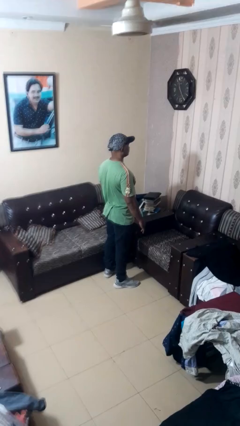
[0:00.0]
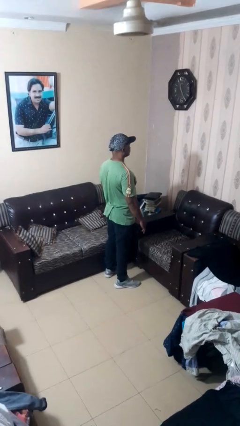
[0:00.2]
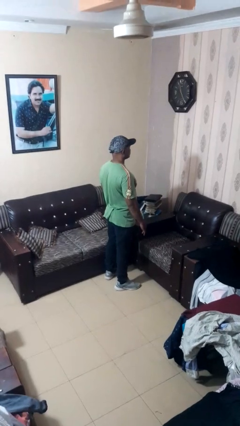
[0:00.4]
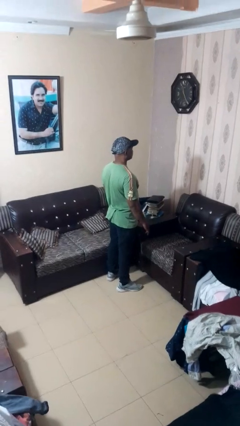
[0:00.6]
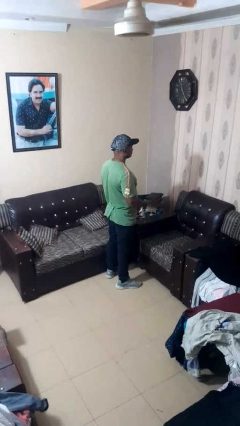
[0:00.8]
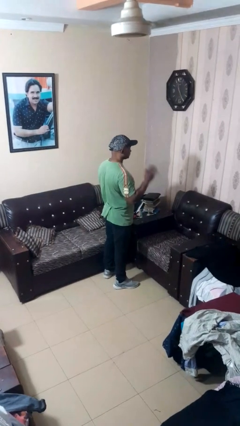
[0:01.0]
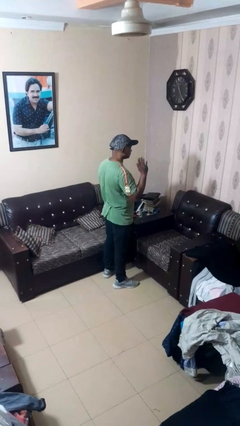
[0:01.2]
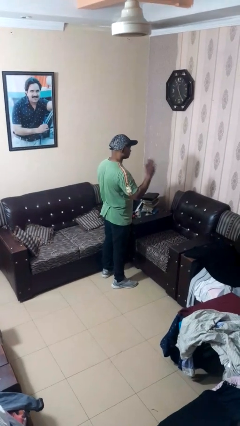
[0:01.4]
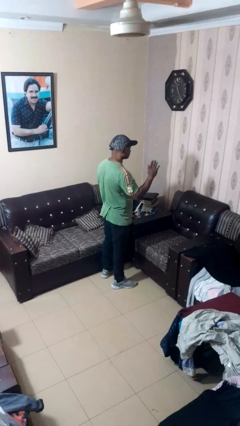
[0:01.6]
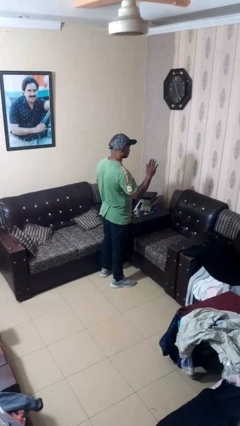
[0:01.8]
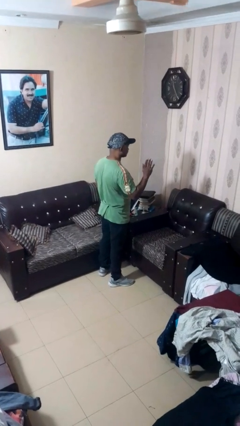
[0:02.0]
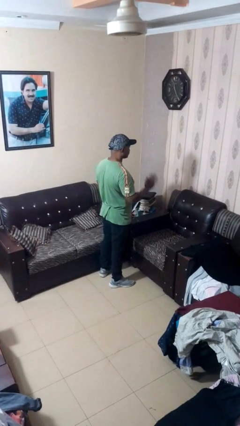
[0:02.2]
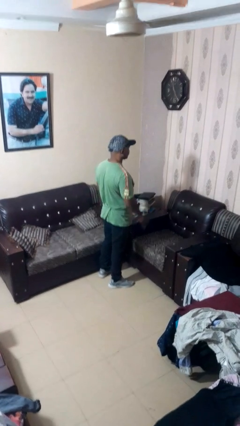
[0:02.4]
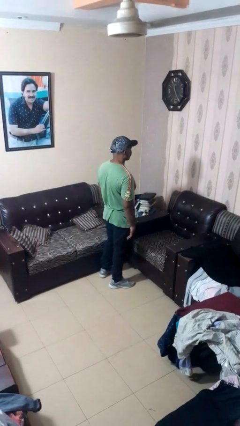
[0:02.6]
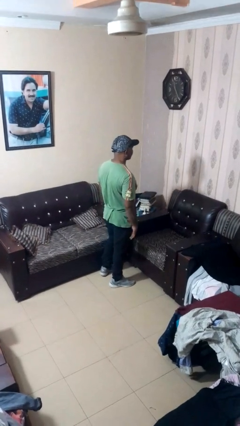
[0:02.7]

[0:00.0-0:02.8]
person gestures stop

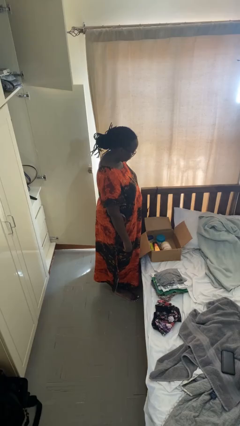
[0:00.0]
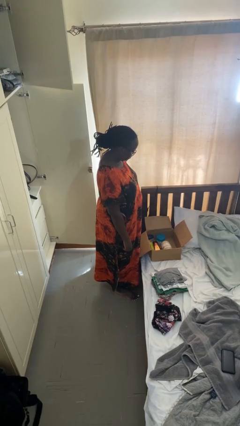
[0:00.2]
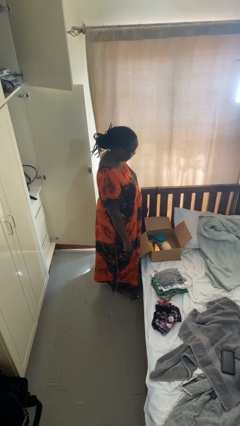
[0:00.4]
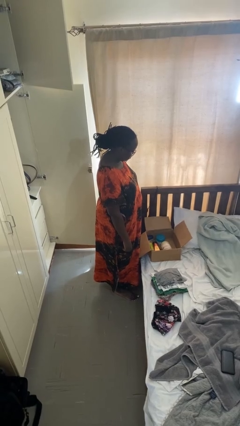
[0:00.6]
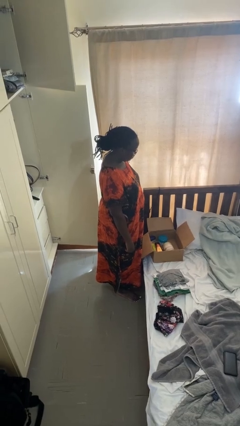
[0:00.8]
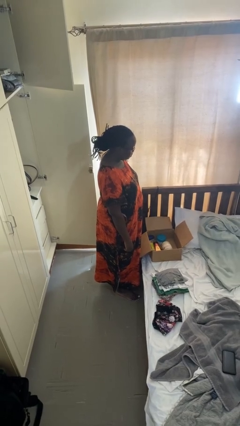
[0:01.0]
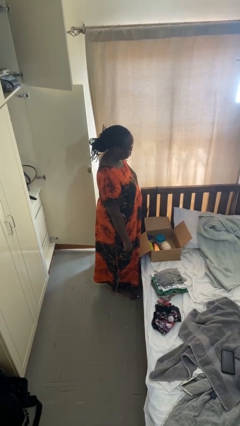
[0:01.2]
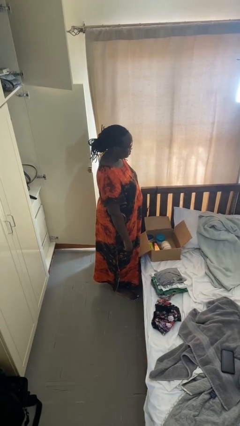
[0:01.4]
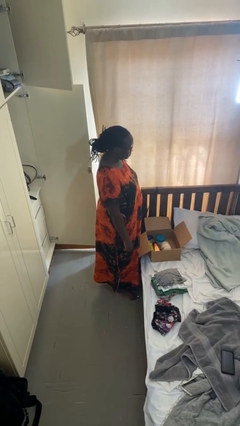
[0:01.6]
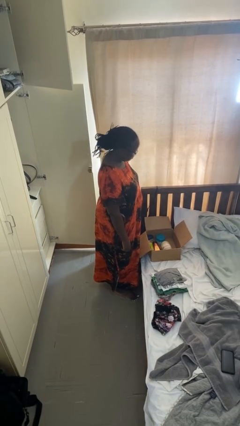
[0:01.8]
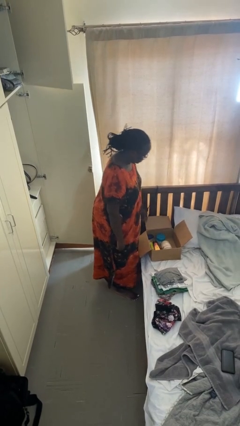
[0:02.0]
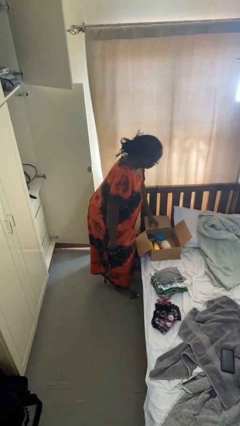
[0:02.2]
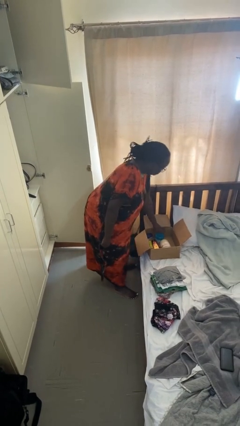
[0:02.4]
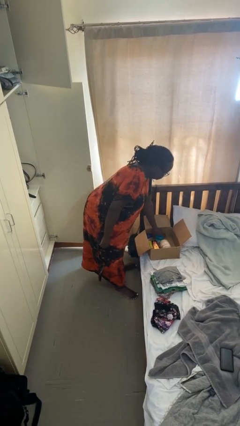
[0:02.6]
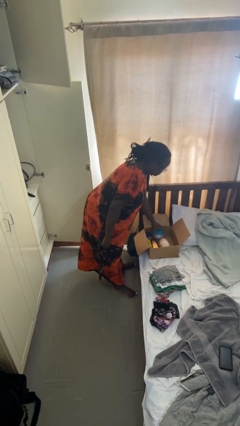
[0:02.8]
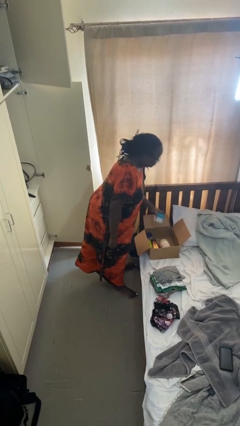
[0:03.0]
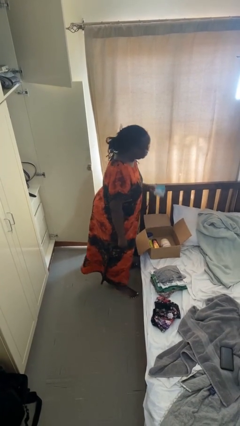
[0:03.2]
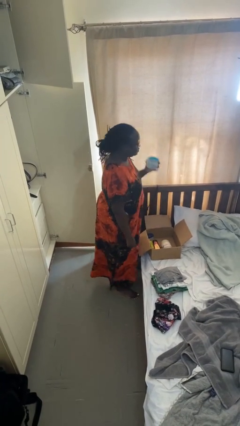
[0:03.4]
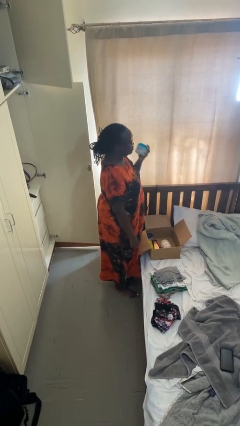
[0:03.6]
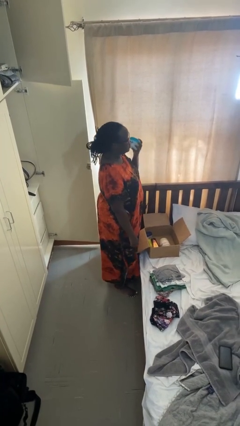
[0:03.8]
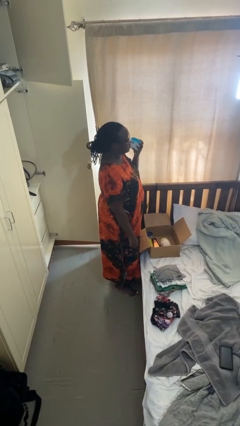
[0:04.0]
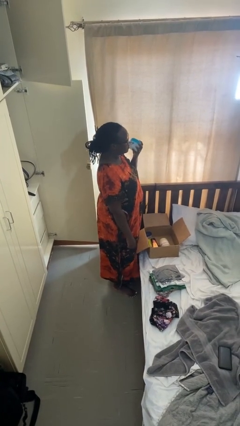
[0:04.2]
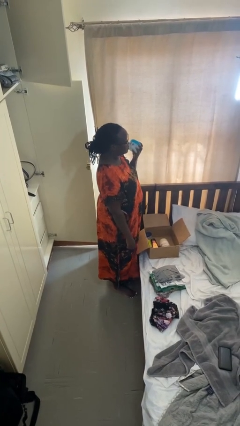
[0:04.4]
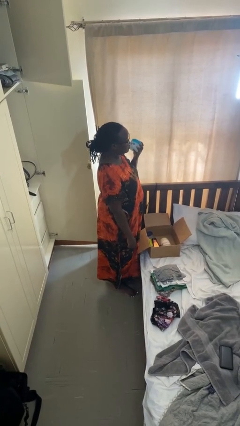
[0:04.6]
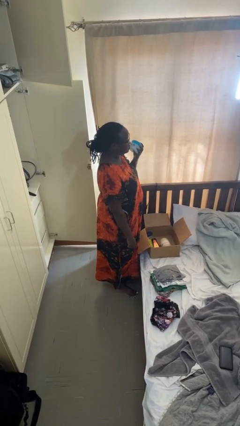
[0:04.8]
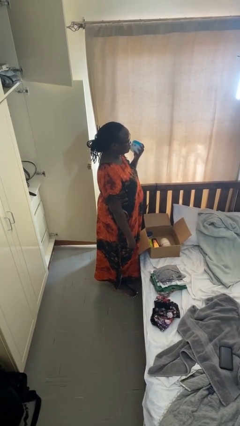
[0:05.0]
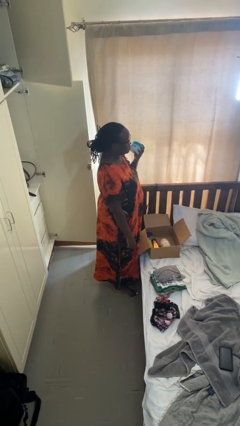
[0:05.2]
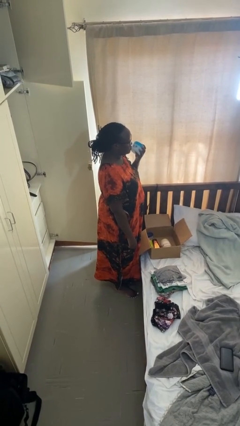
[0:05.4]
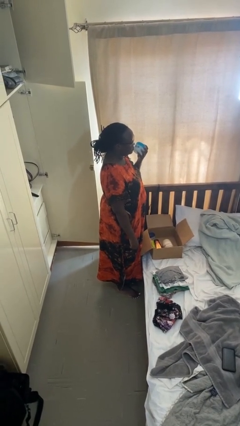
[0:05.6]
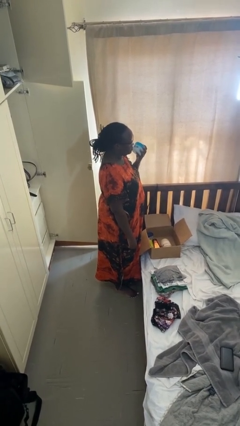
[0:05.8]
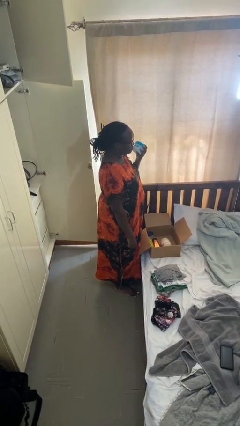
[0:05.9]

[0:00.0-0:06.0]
person takes object from box

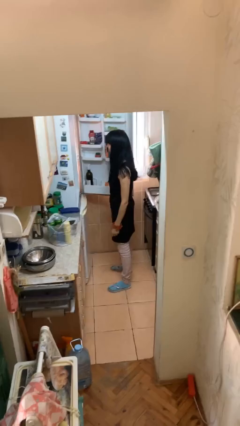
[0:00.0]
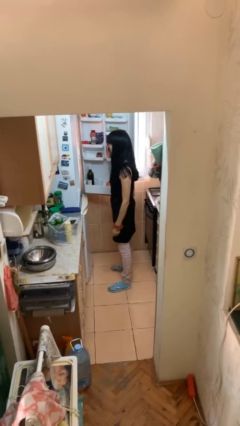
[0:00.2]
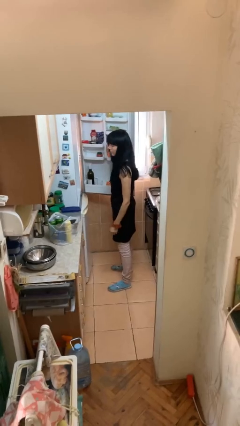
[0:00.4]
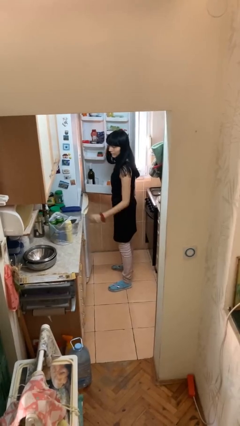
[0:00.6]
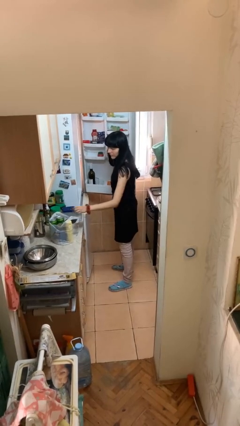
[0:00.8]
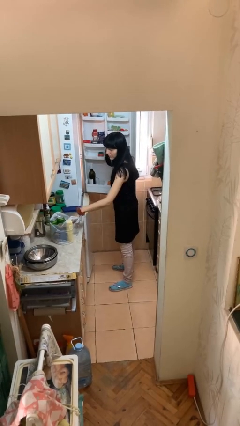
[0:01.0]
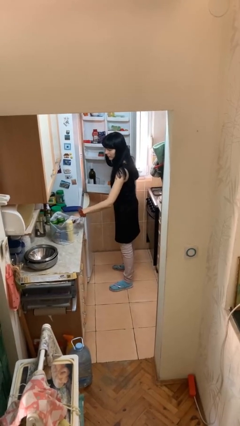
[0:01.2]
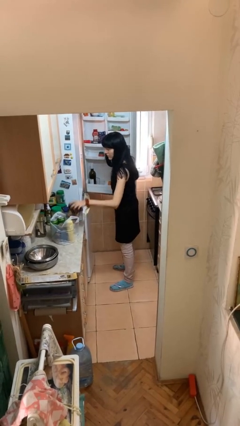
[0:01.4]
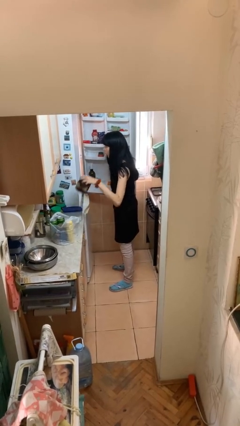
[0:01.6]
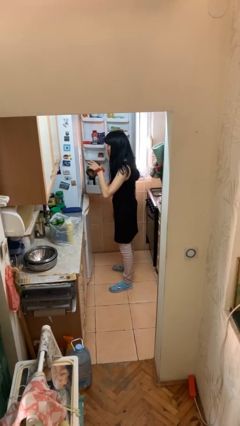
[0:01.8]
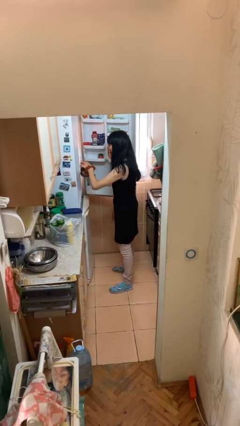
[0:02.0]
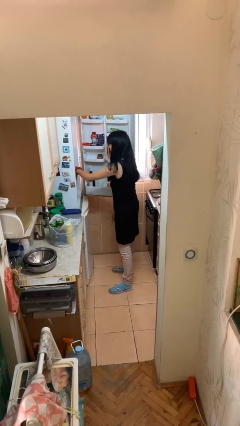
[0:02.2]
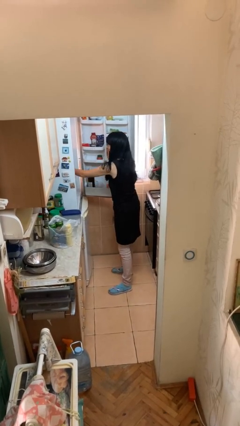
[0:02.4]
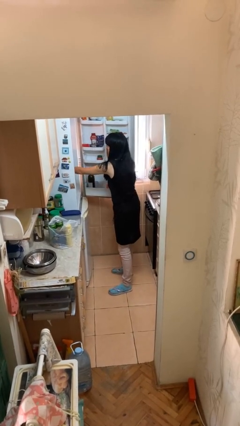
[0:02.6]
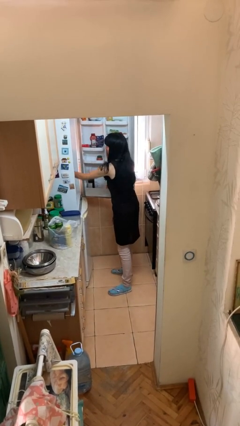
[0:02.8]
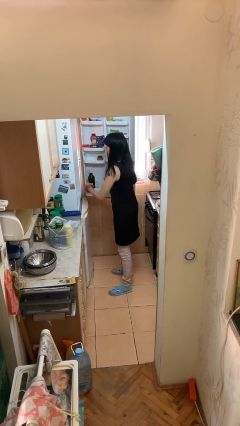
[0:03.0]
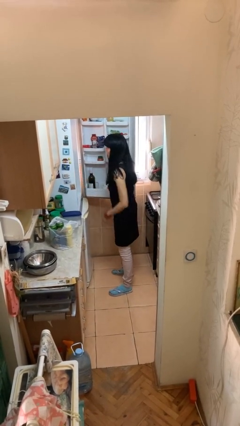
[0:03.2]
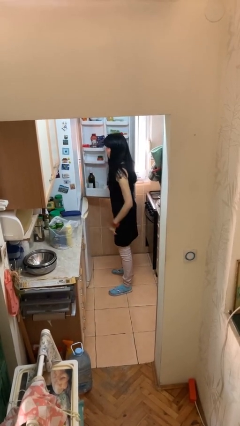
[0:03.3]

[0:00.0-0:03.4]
person loads groceries into refrigerator

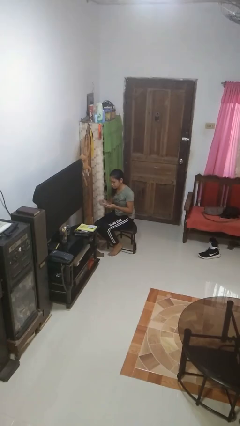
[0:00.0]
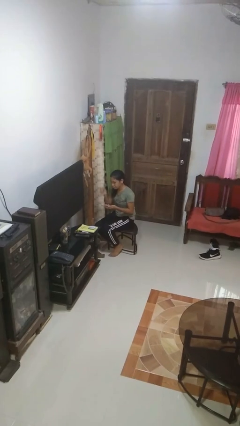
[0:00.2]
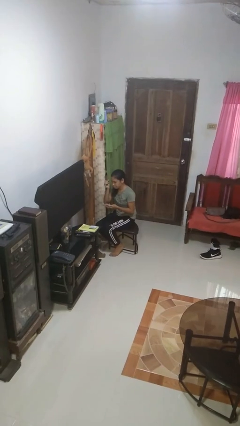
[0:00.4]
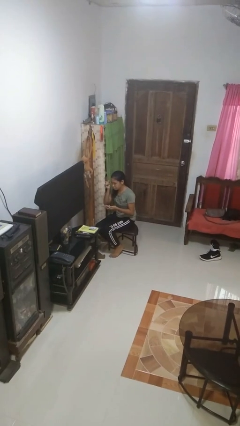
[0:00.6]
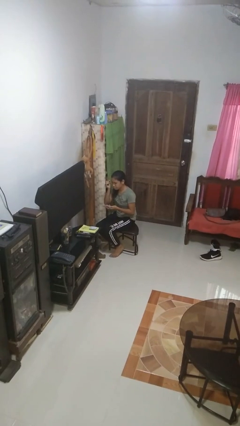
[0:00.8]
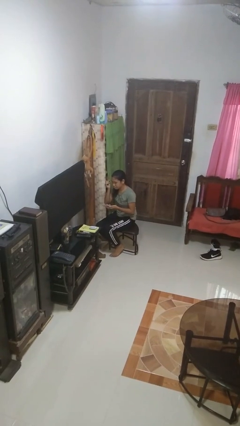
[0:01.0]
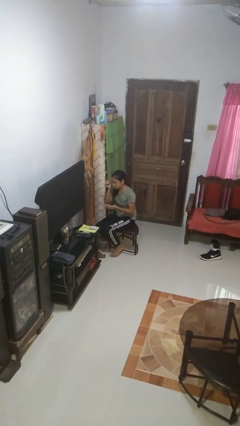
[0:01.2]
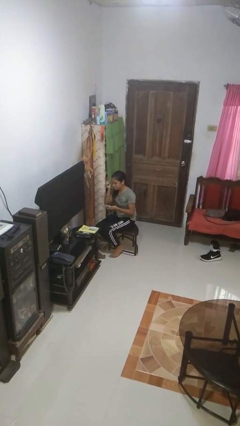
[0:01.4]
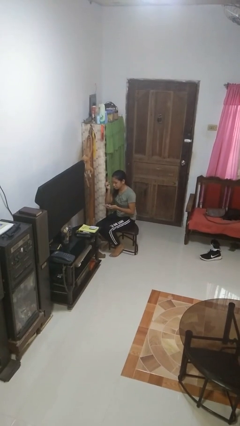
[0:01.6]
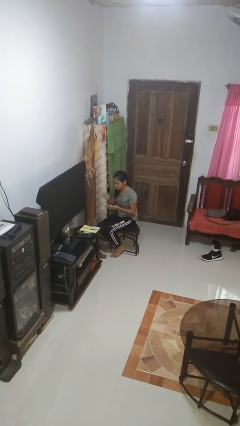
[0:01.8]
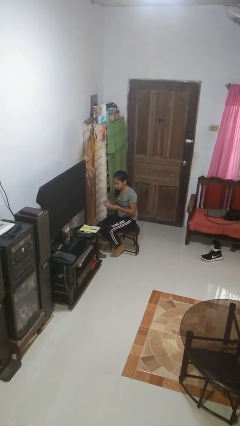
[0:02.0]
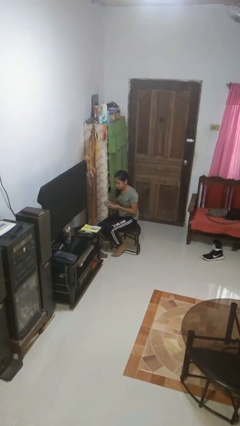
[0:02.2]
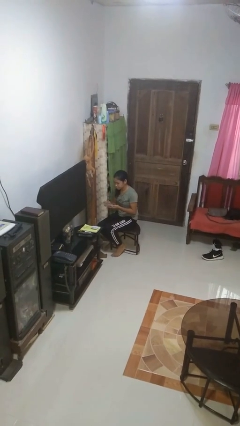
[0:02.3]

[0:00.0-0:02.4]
person applies eye makeup

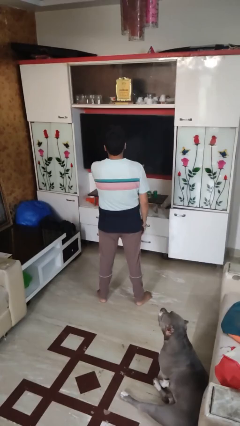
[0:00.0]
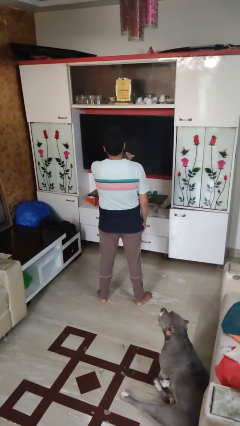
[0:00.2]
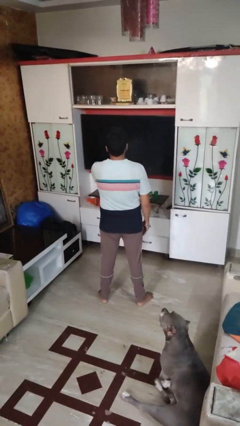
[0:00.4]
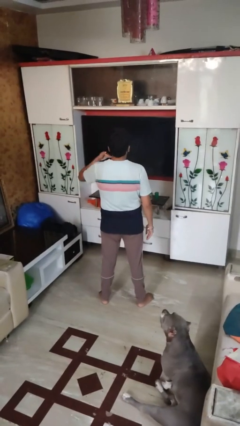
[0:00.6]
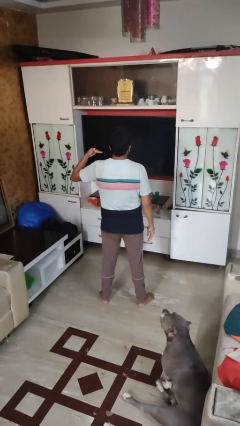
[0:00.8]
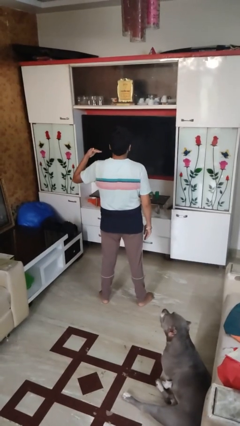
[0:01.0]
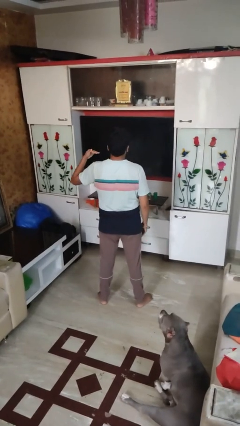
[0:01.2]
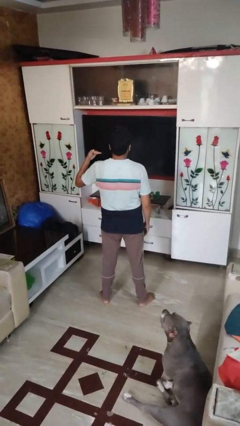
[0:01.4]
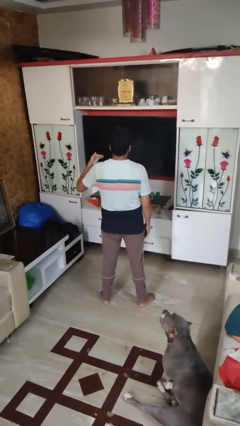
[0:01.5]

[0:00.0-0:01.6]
person gestures cut

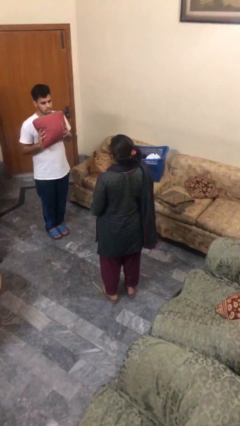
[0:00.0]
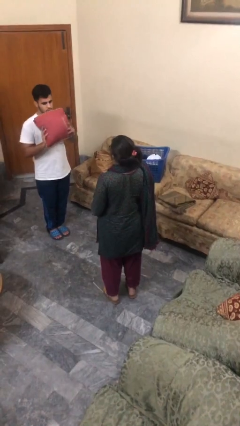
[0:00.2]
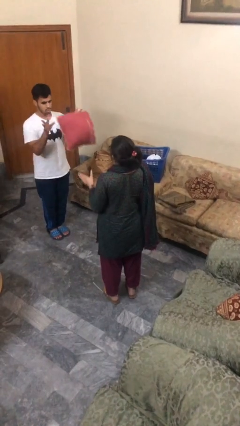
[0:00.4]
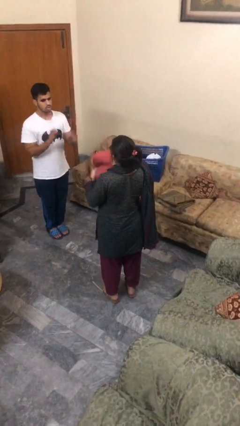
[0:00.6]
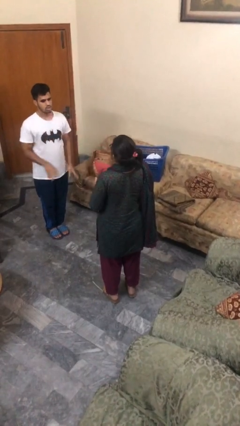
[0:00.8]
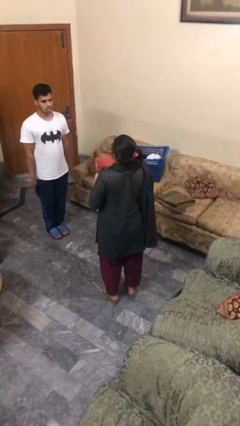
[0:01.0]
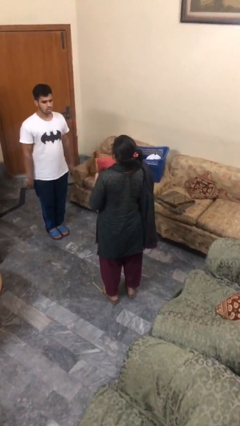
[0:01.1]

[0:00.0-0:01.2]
person catches object from person
